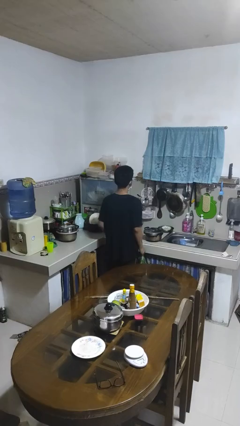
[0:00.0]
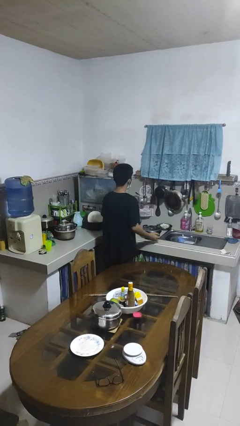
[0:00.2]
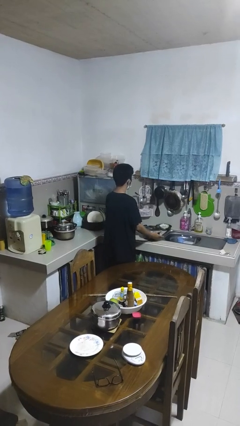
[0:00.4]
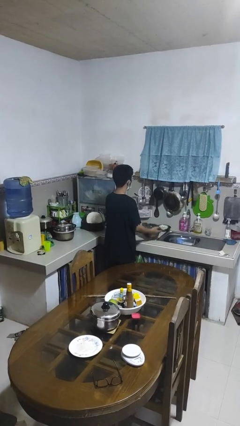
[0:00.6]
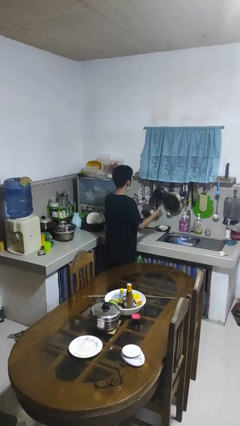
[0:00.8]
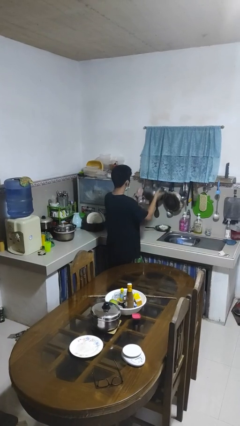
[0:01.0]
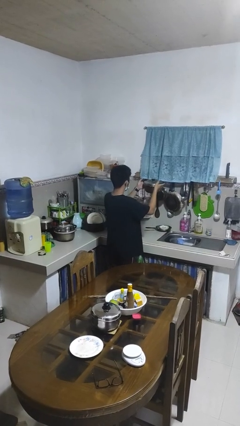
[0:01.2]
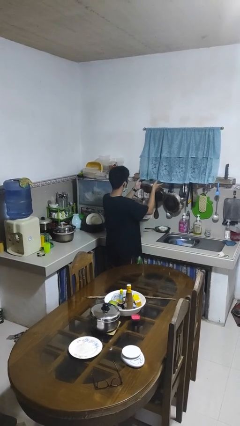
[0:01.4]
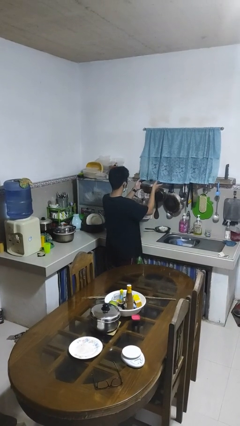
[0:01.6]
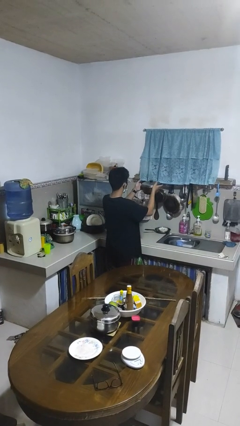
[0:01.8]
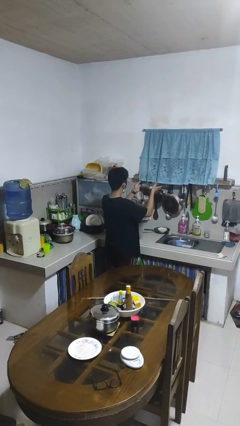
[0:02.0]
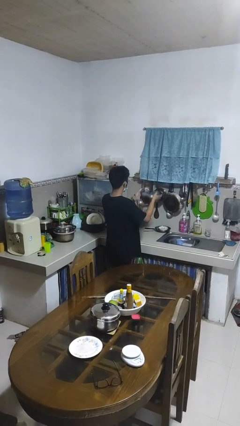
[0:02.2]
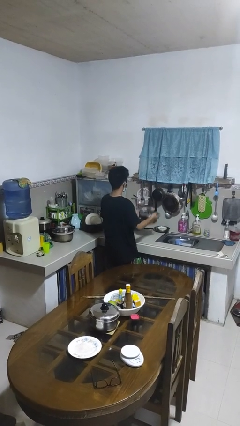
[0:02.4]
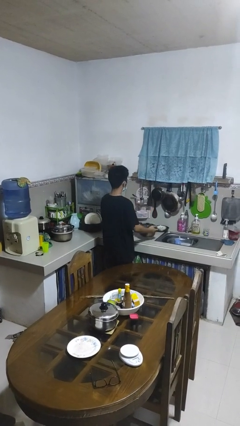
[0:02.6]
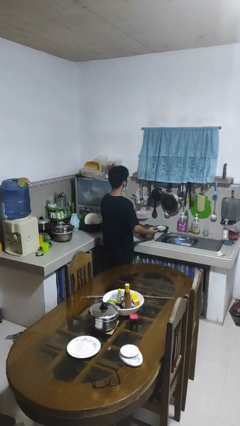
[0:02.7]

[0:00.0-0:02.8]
person picks up object from countertop

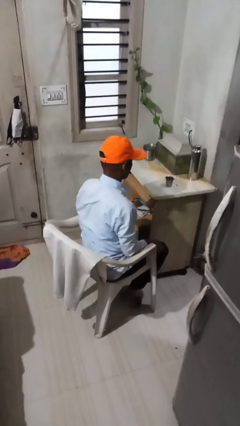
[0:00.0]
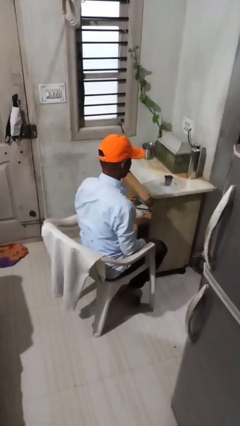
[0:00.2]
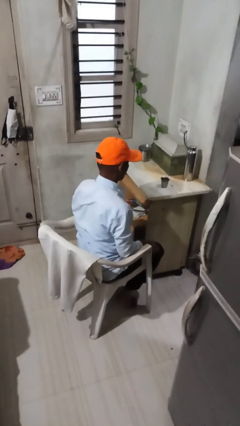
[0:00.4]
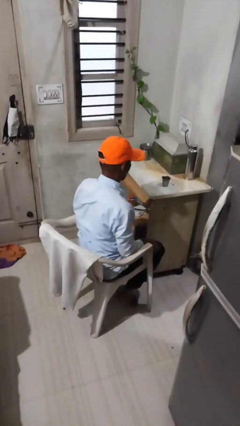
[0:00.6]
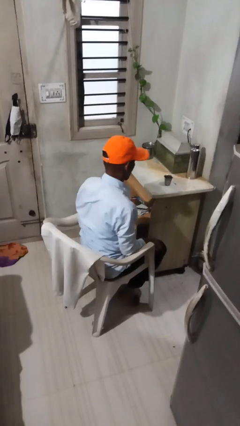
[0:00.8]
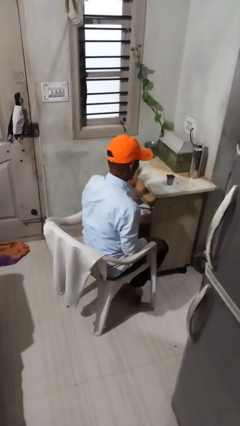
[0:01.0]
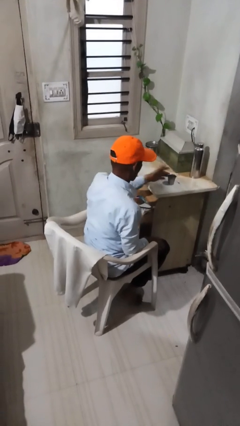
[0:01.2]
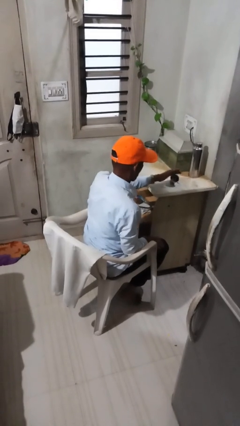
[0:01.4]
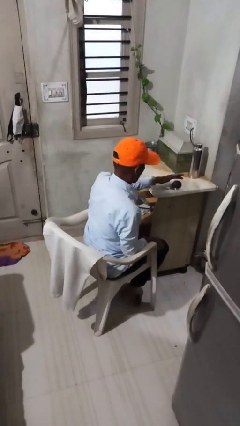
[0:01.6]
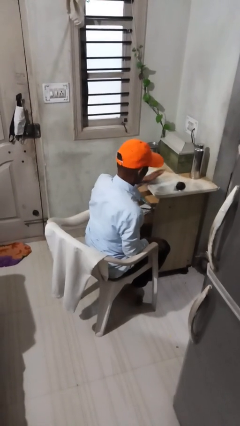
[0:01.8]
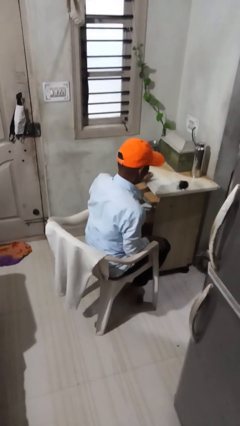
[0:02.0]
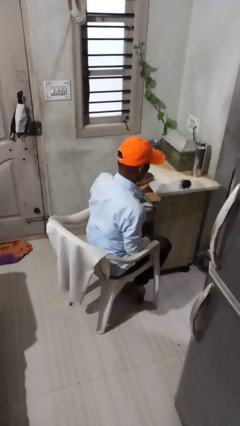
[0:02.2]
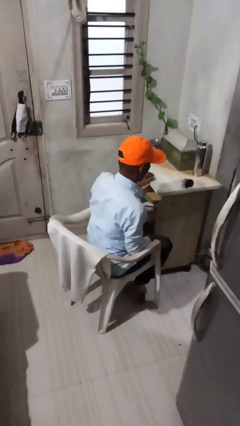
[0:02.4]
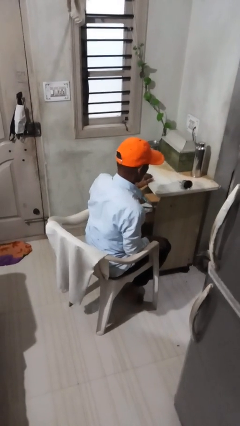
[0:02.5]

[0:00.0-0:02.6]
person knocks over glass

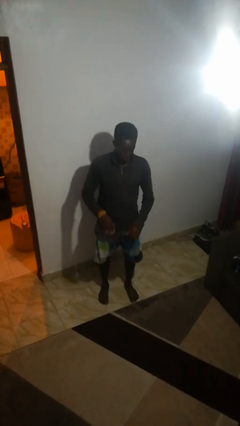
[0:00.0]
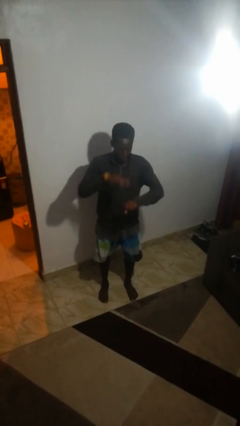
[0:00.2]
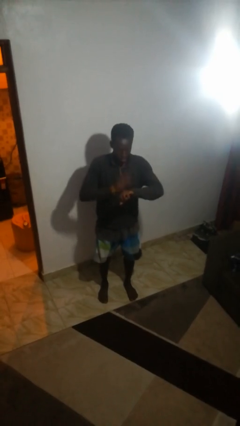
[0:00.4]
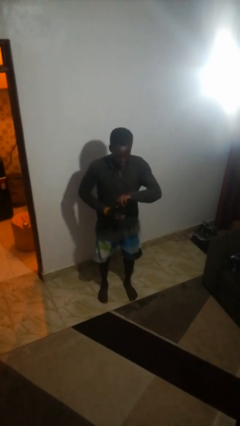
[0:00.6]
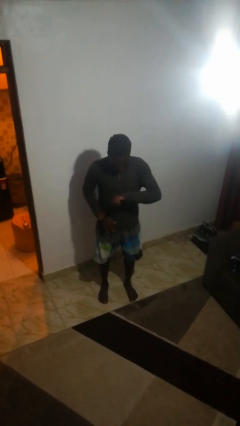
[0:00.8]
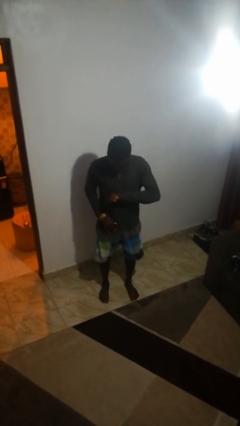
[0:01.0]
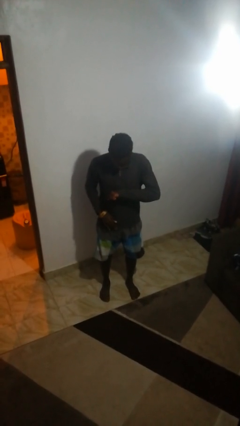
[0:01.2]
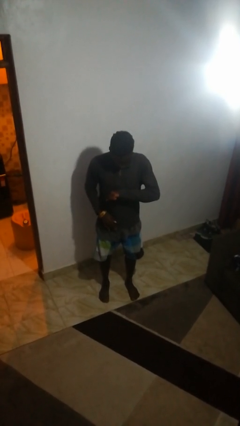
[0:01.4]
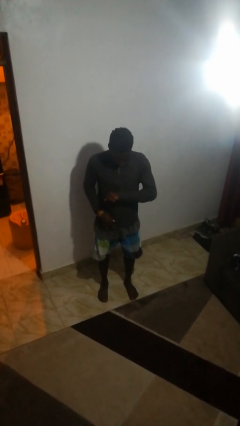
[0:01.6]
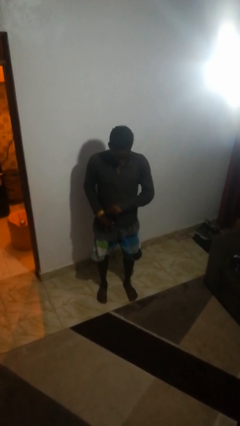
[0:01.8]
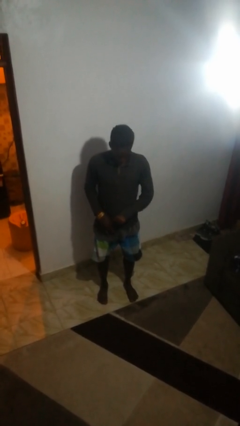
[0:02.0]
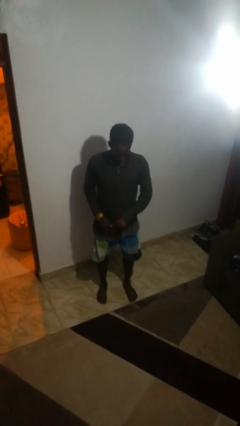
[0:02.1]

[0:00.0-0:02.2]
person swats bug

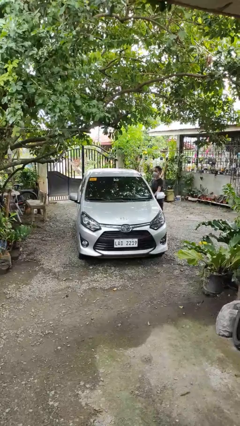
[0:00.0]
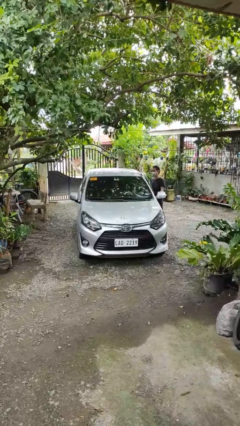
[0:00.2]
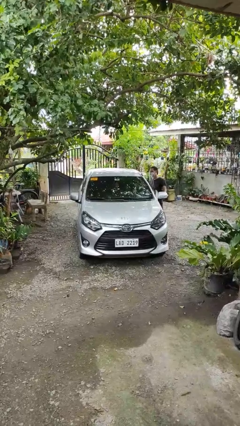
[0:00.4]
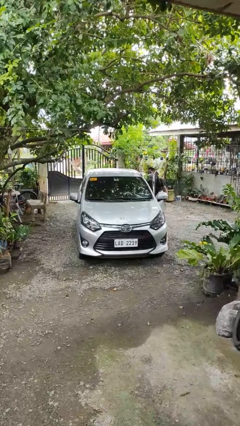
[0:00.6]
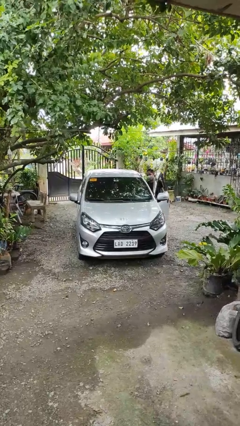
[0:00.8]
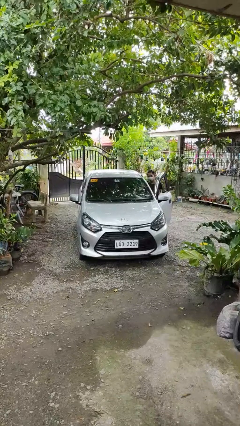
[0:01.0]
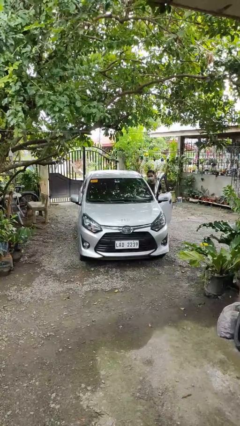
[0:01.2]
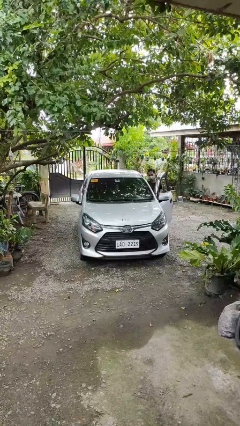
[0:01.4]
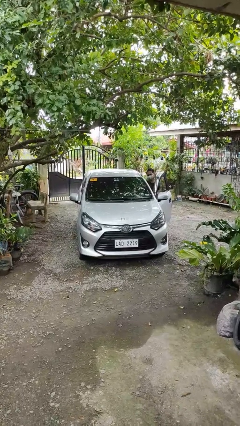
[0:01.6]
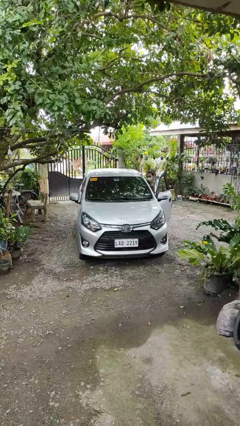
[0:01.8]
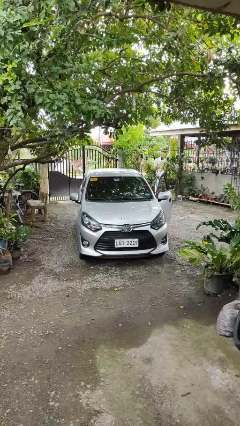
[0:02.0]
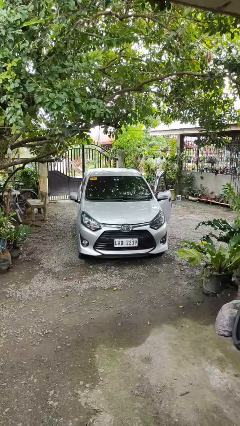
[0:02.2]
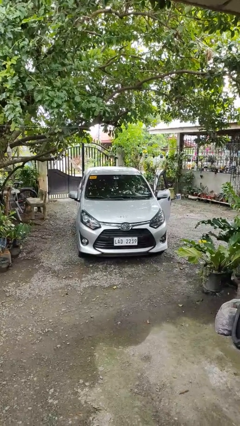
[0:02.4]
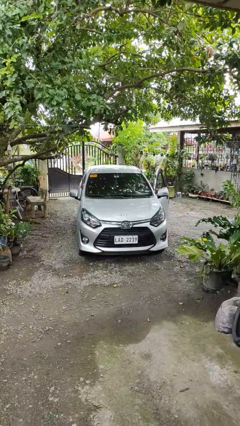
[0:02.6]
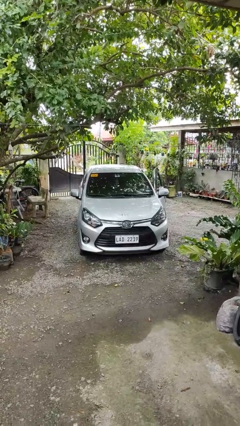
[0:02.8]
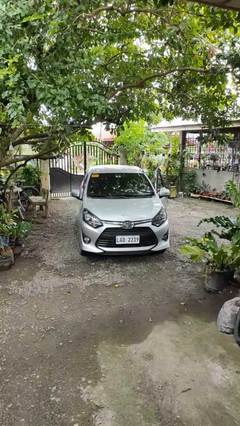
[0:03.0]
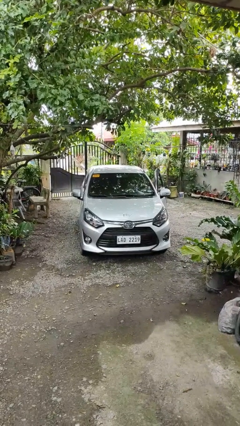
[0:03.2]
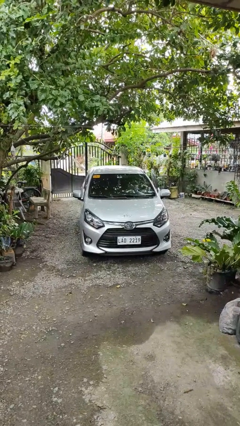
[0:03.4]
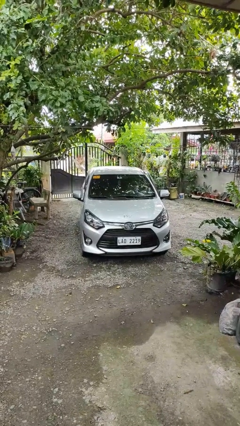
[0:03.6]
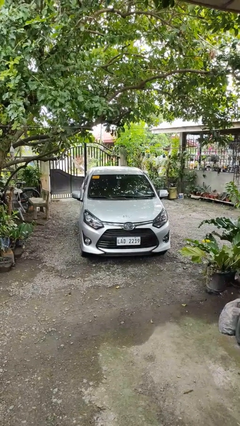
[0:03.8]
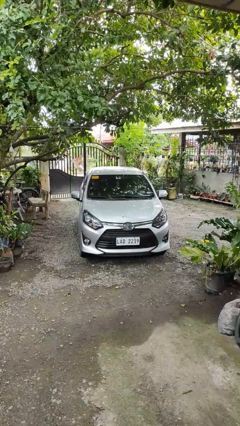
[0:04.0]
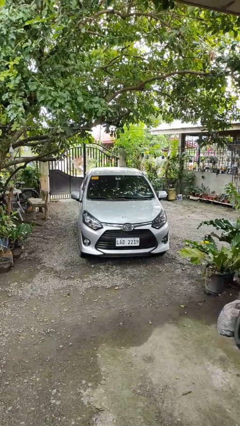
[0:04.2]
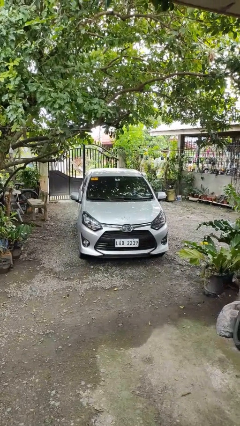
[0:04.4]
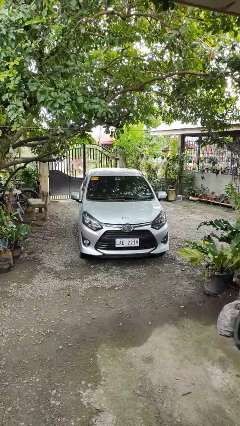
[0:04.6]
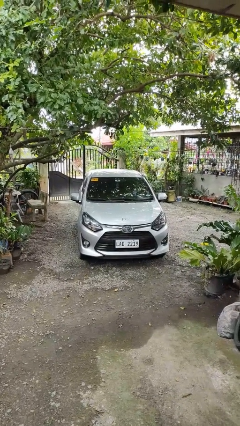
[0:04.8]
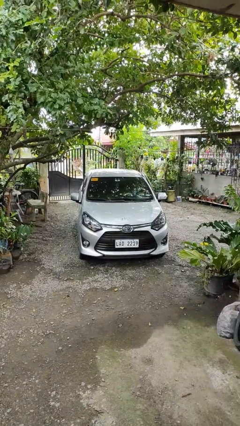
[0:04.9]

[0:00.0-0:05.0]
car picks up person

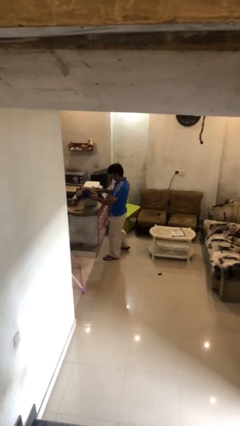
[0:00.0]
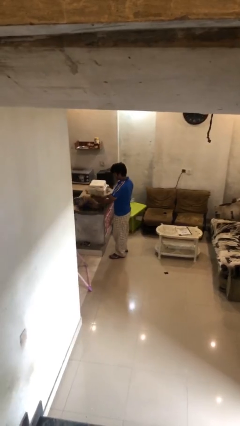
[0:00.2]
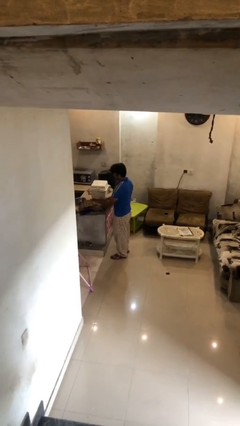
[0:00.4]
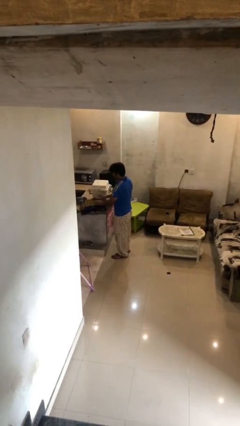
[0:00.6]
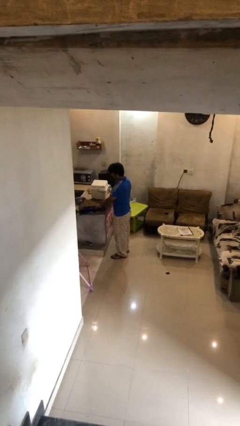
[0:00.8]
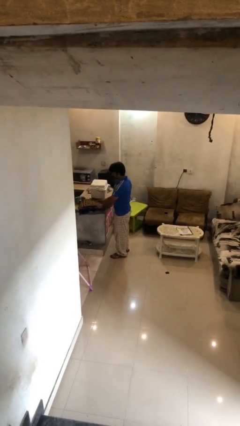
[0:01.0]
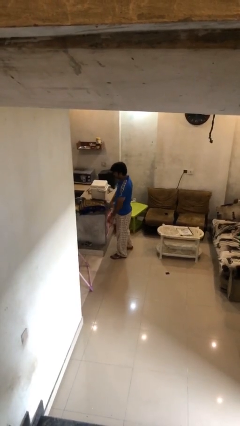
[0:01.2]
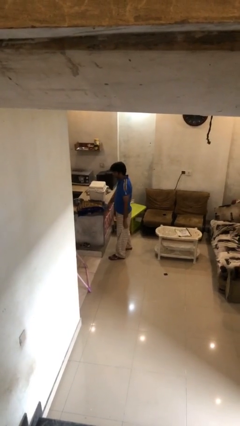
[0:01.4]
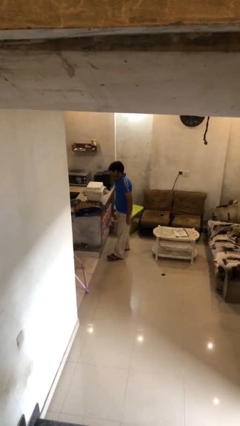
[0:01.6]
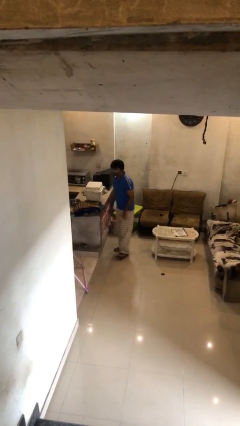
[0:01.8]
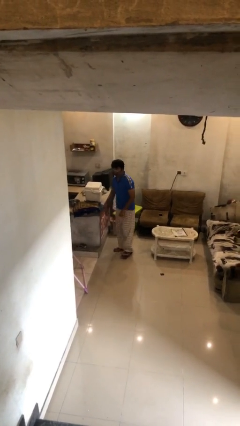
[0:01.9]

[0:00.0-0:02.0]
person puts down object on shelf

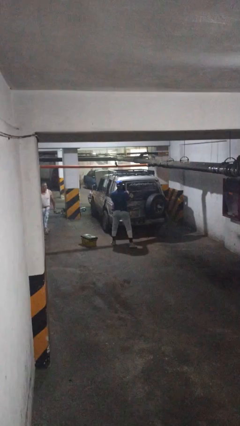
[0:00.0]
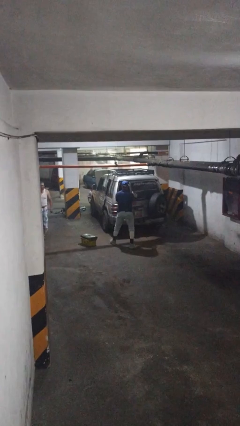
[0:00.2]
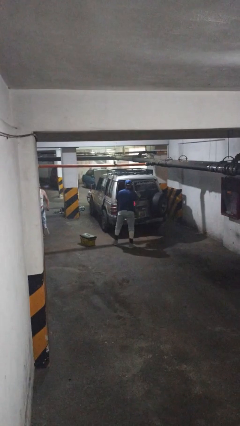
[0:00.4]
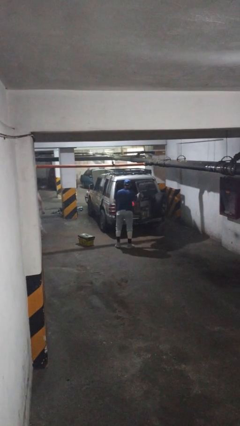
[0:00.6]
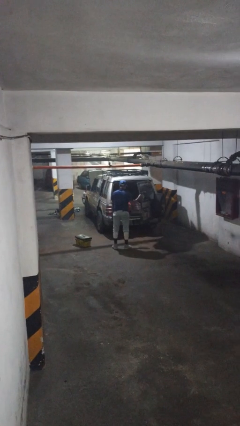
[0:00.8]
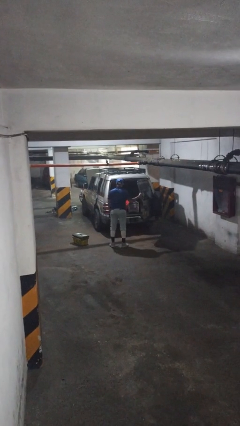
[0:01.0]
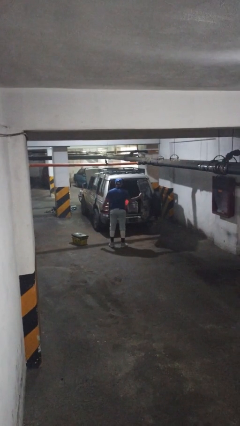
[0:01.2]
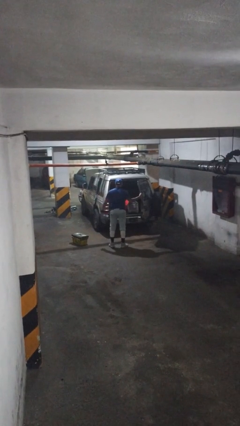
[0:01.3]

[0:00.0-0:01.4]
person opens car trunk

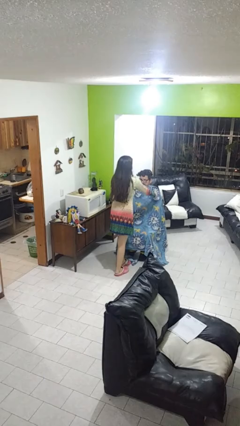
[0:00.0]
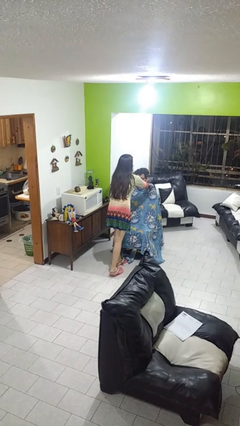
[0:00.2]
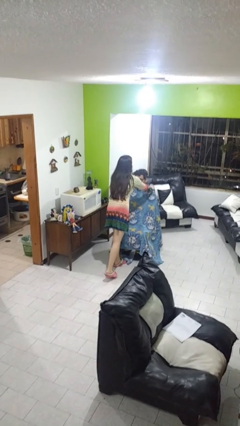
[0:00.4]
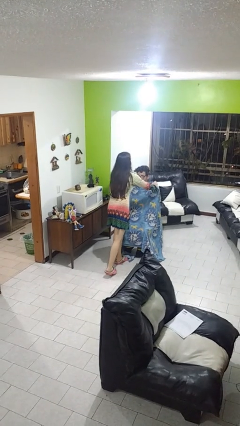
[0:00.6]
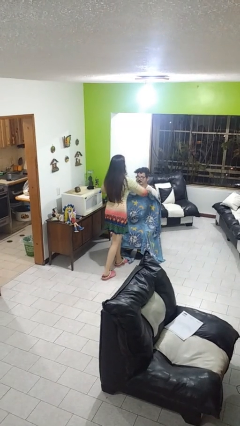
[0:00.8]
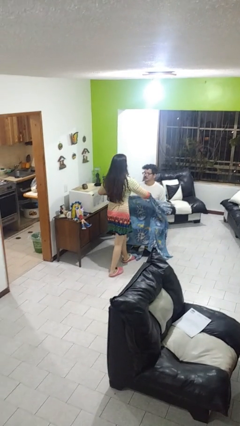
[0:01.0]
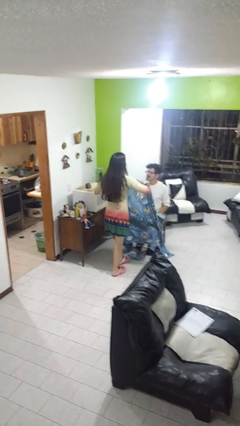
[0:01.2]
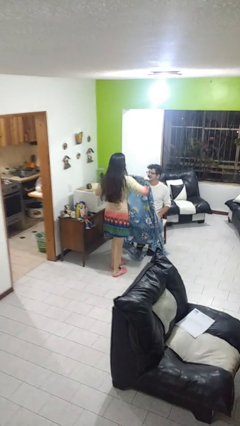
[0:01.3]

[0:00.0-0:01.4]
person uncovers friend with blanket

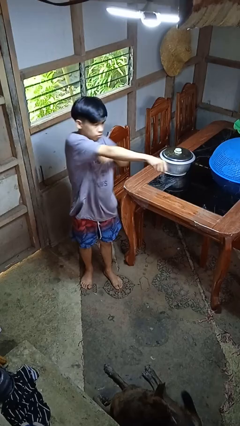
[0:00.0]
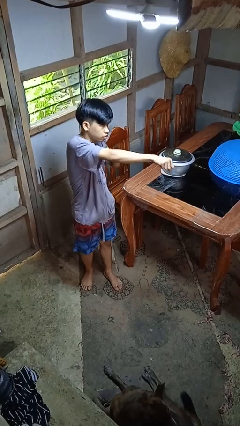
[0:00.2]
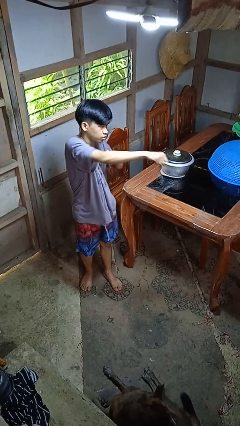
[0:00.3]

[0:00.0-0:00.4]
person punches
